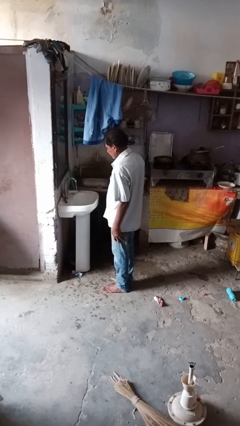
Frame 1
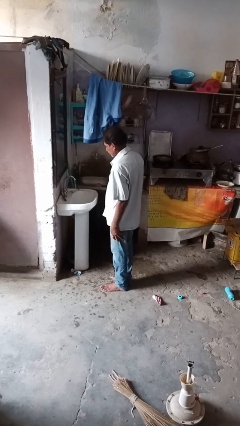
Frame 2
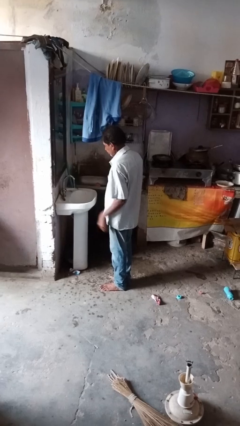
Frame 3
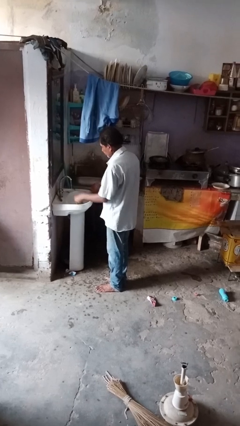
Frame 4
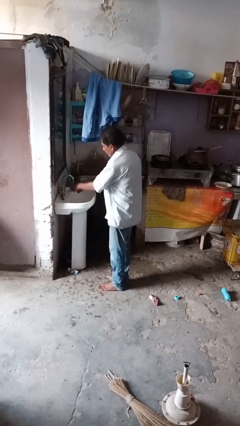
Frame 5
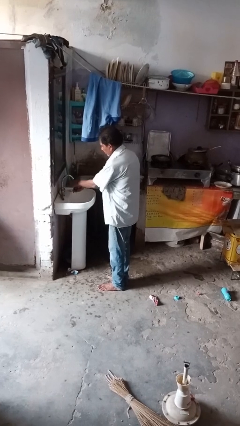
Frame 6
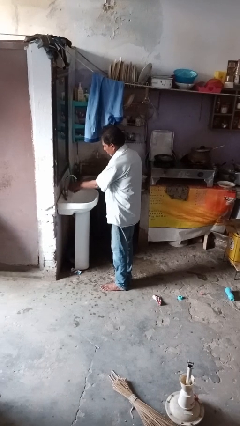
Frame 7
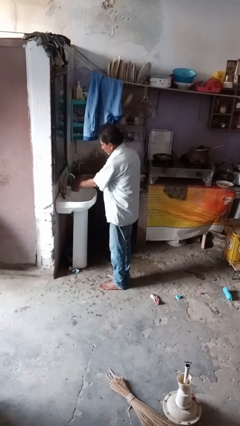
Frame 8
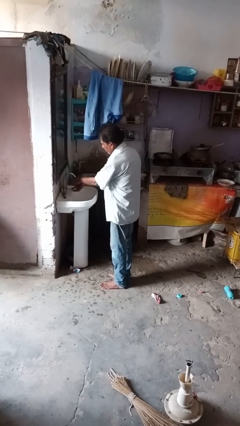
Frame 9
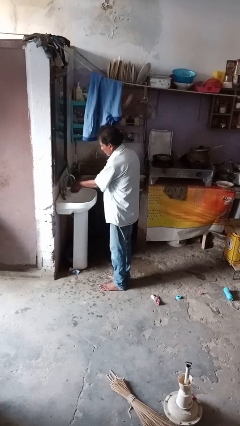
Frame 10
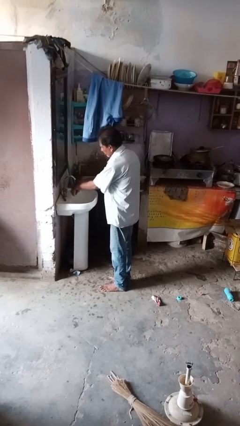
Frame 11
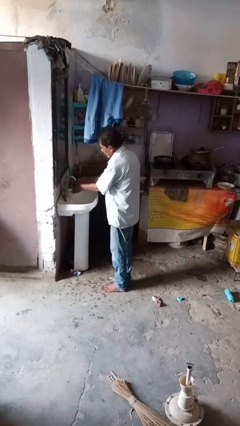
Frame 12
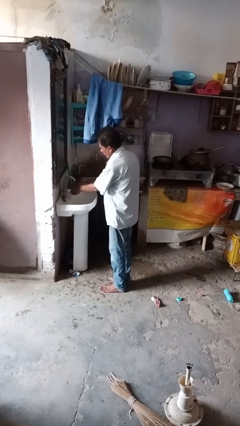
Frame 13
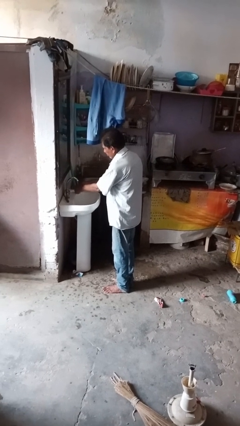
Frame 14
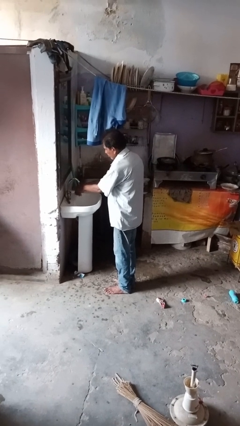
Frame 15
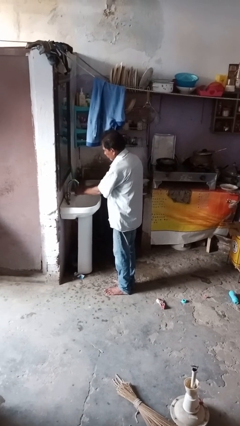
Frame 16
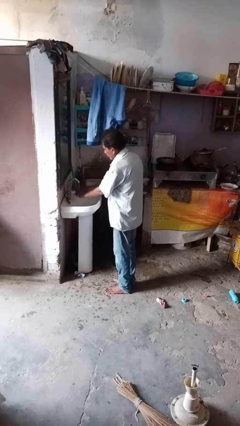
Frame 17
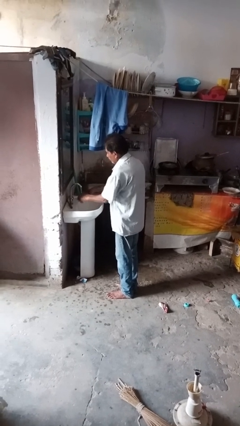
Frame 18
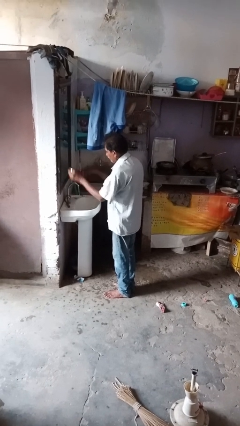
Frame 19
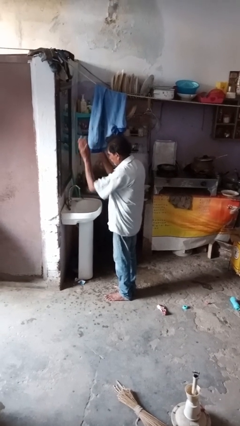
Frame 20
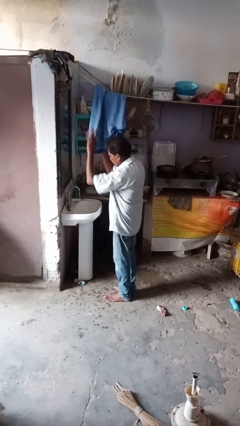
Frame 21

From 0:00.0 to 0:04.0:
person washes hands

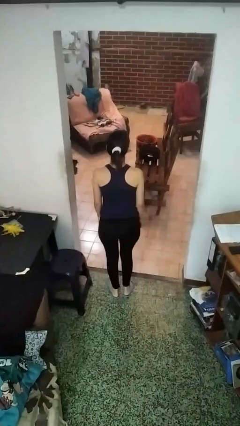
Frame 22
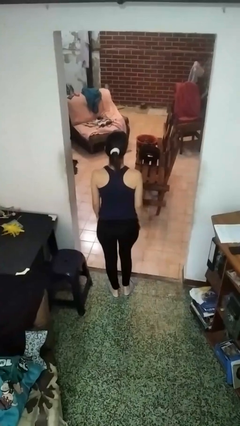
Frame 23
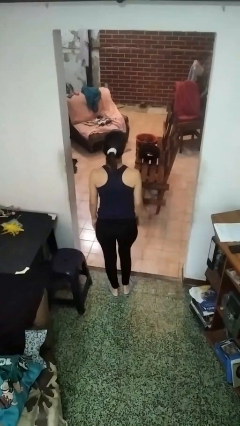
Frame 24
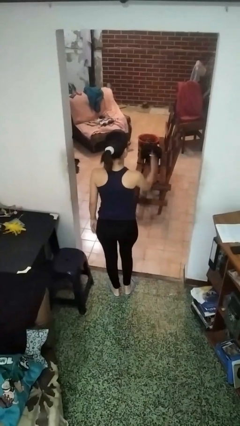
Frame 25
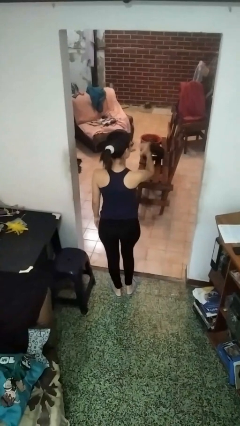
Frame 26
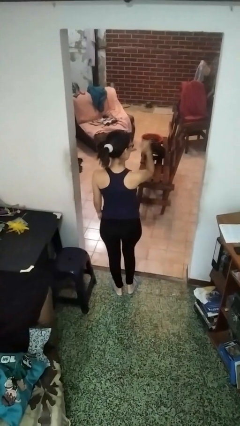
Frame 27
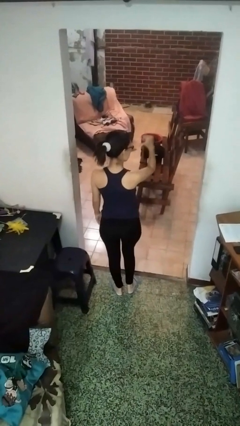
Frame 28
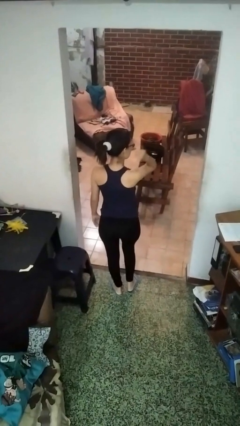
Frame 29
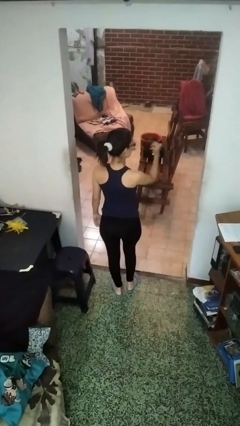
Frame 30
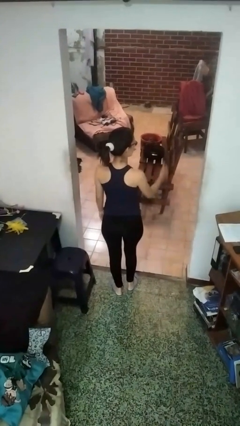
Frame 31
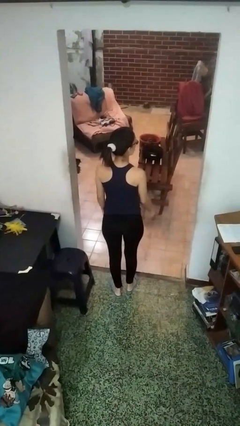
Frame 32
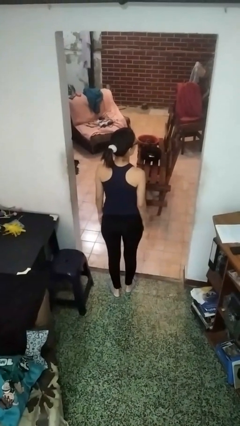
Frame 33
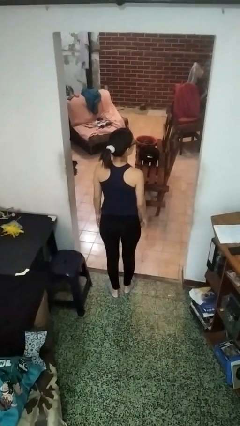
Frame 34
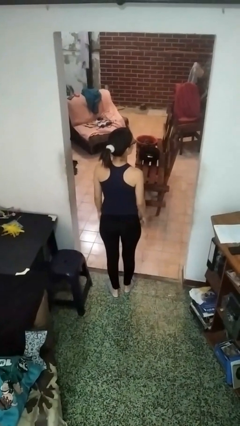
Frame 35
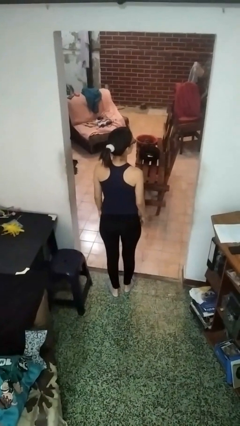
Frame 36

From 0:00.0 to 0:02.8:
person gestures behind me

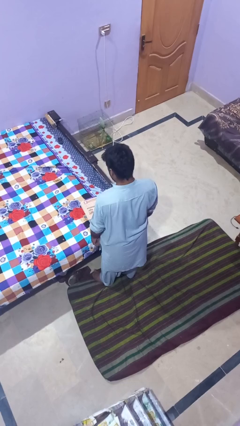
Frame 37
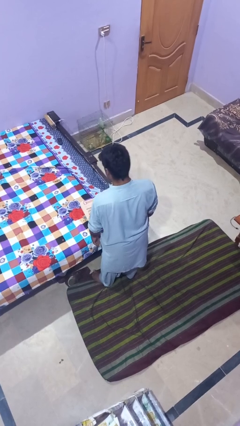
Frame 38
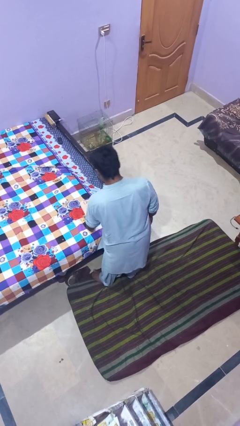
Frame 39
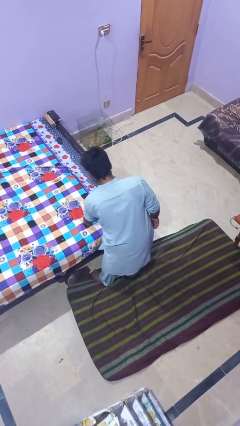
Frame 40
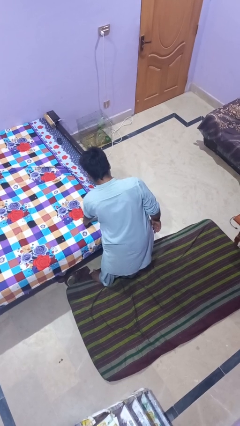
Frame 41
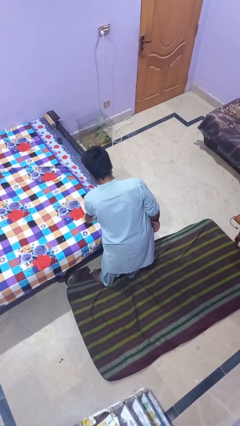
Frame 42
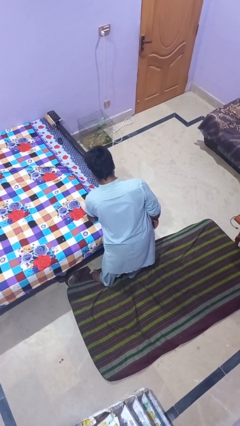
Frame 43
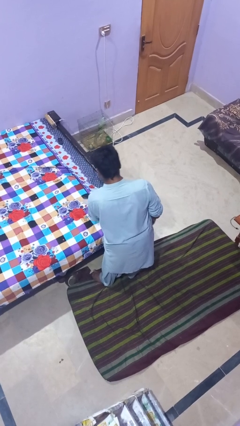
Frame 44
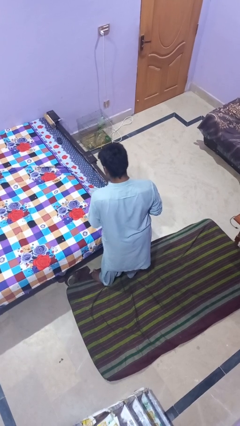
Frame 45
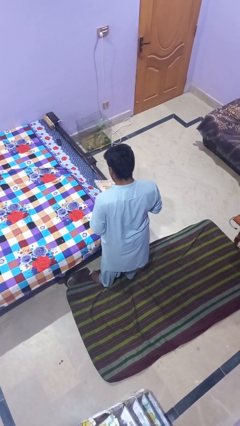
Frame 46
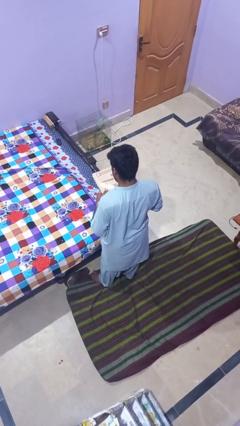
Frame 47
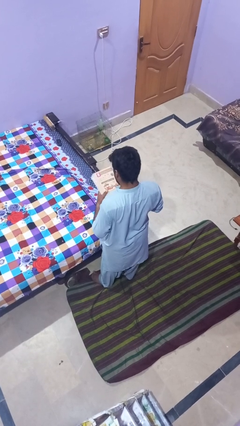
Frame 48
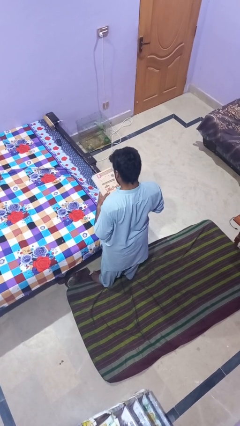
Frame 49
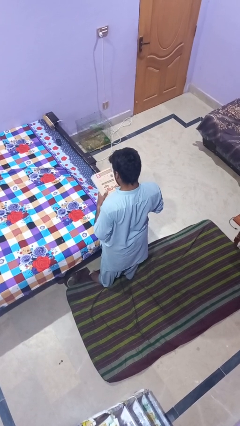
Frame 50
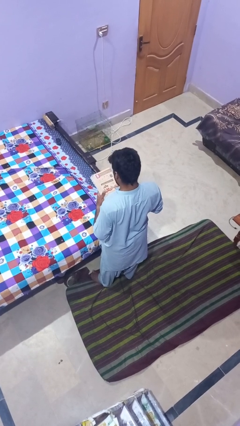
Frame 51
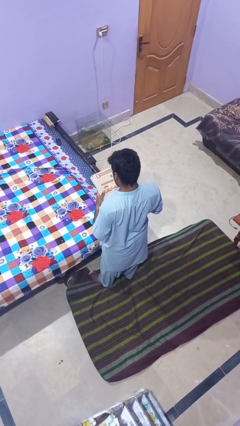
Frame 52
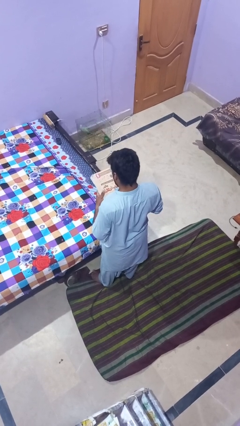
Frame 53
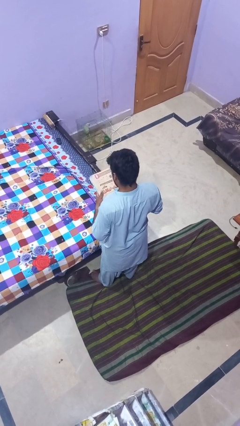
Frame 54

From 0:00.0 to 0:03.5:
person picks up object from bed

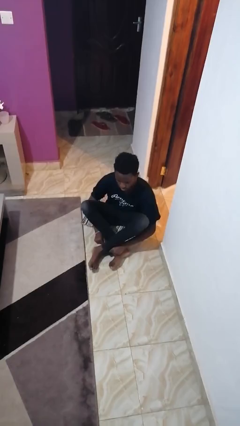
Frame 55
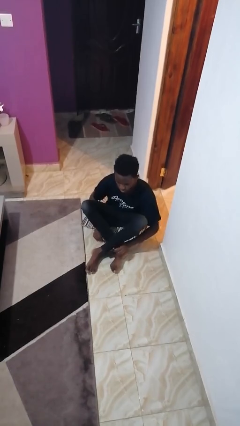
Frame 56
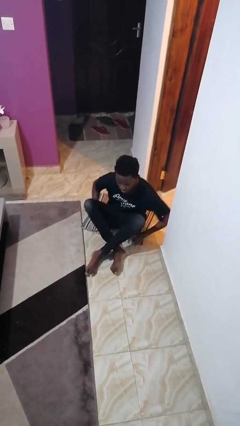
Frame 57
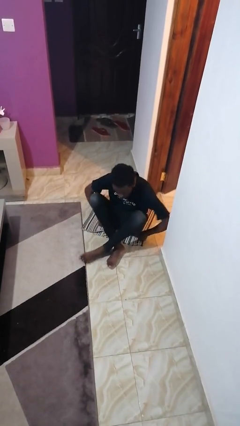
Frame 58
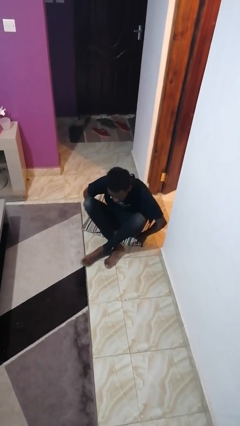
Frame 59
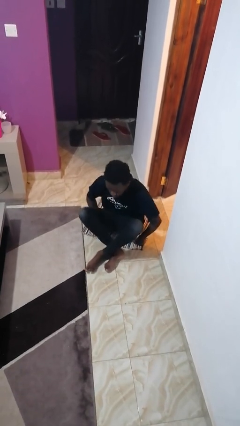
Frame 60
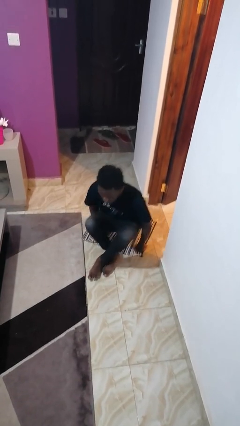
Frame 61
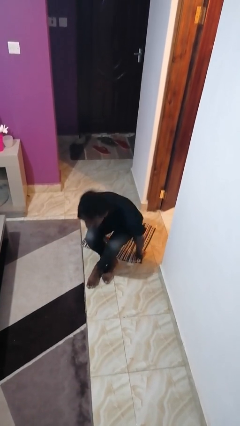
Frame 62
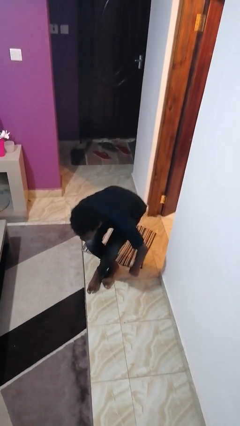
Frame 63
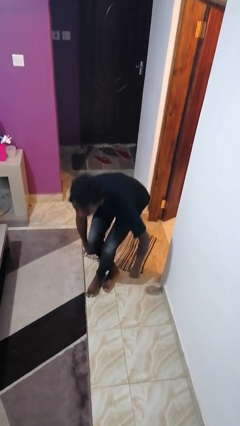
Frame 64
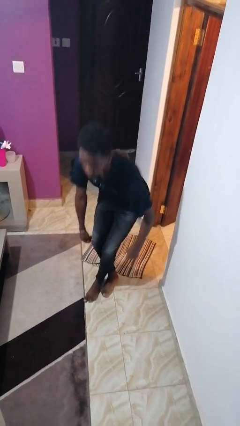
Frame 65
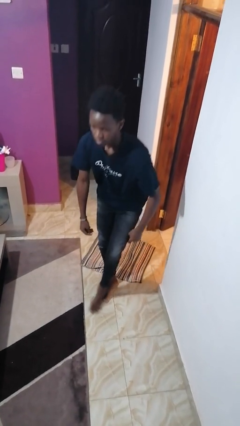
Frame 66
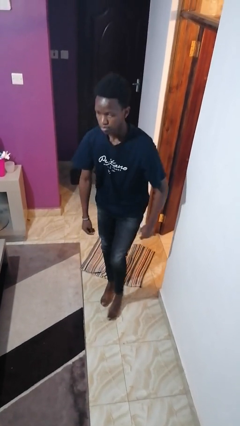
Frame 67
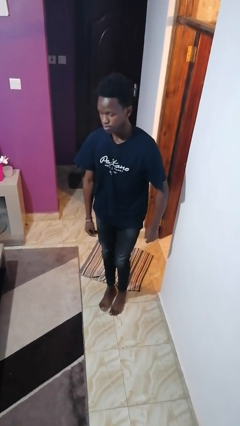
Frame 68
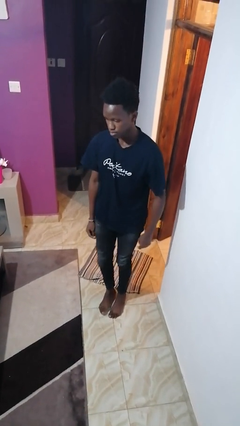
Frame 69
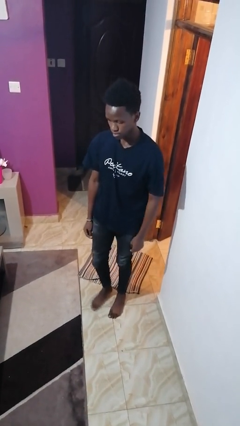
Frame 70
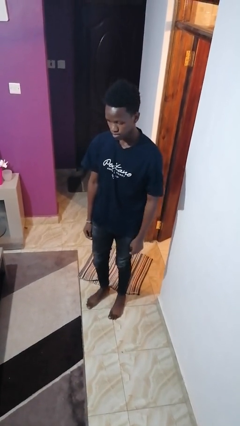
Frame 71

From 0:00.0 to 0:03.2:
person stands up from floor

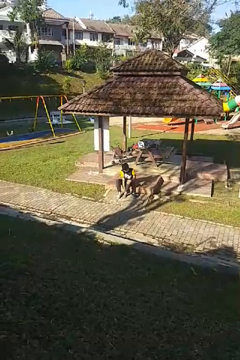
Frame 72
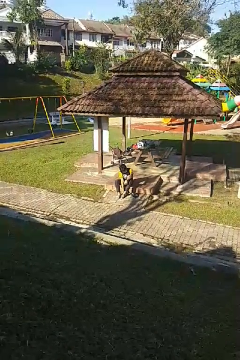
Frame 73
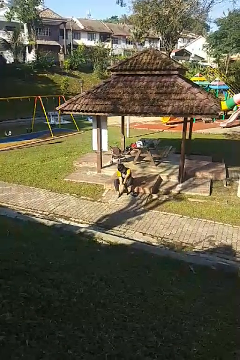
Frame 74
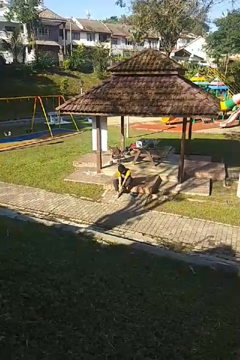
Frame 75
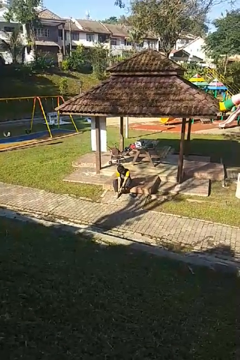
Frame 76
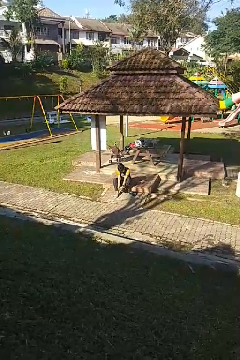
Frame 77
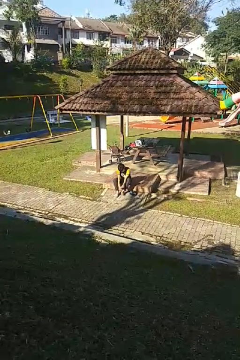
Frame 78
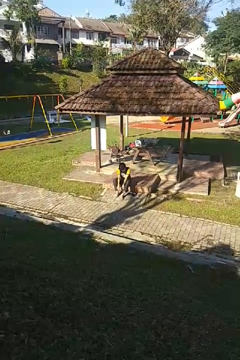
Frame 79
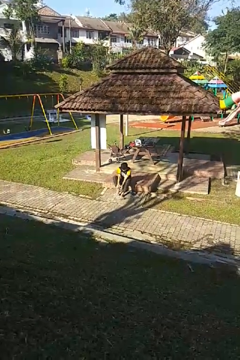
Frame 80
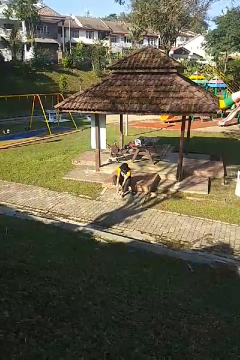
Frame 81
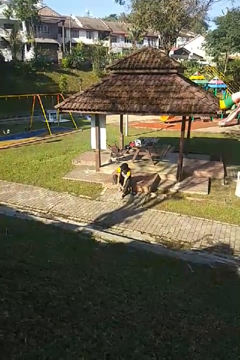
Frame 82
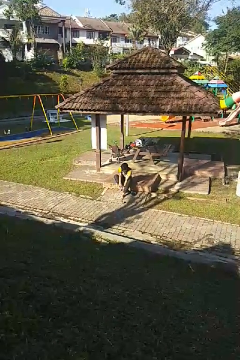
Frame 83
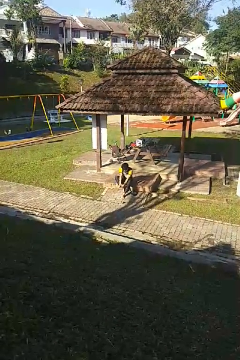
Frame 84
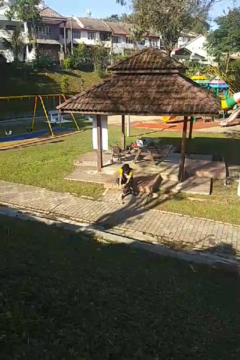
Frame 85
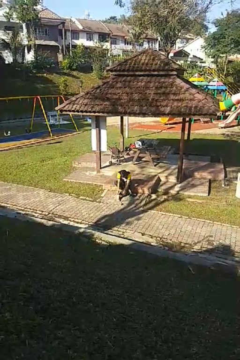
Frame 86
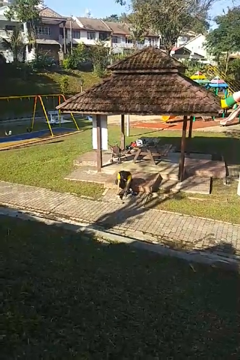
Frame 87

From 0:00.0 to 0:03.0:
person takes off socks

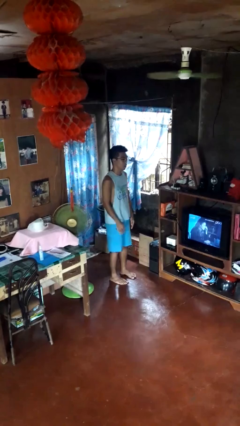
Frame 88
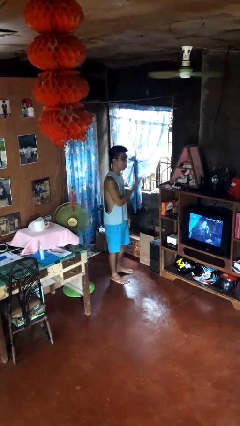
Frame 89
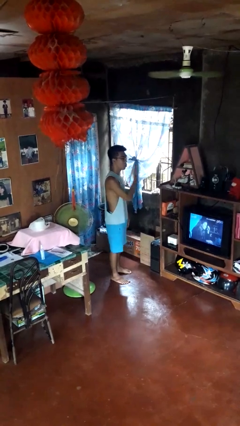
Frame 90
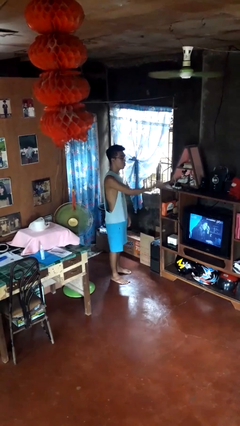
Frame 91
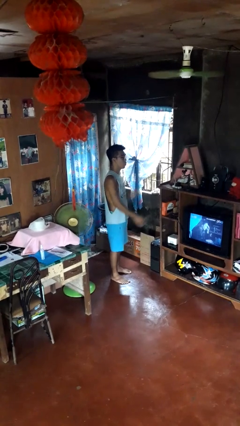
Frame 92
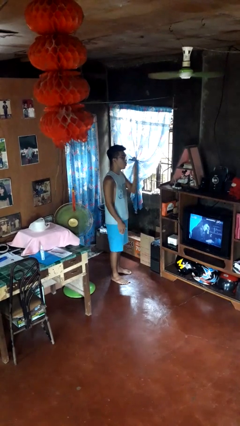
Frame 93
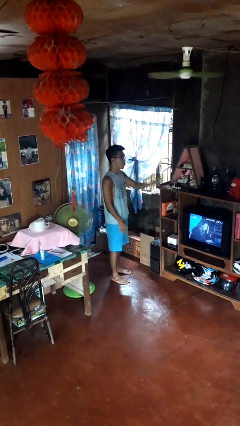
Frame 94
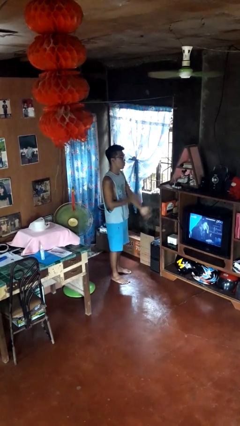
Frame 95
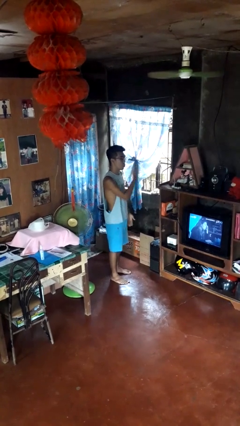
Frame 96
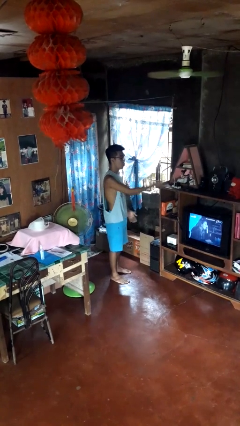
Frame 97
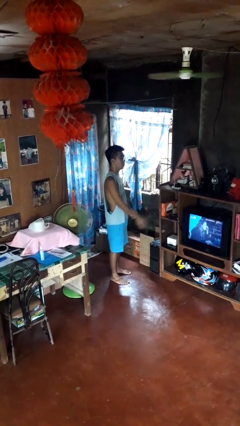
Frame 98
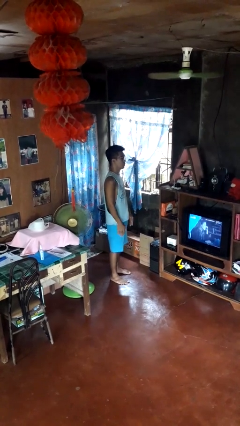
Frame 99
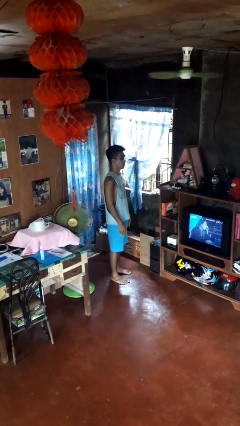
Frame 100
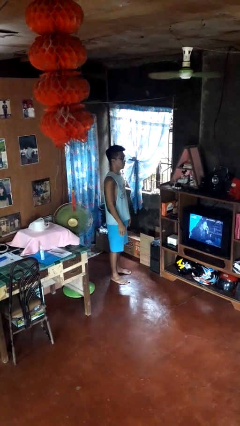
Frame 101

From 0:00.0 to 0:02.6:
person gestures blow kiss
